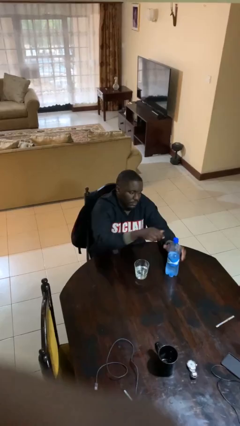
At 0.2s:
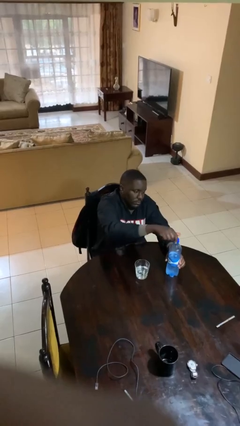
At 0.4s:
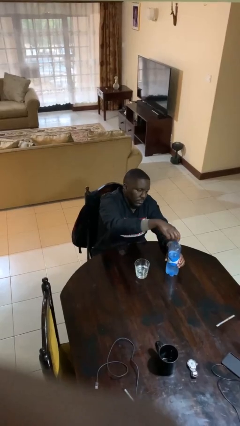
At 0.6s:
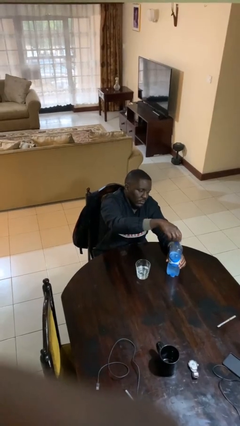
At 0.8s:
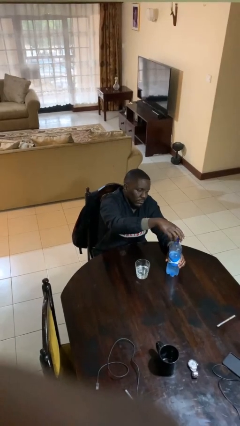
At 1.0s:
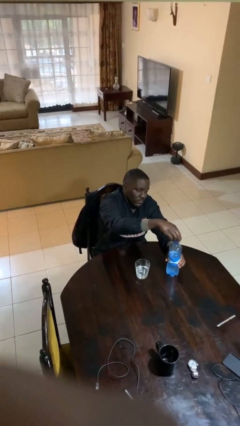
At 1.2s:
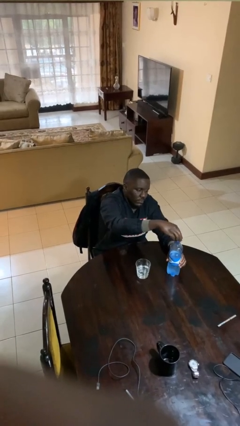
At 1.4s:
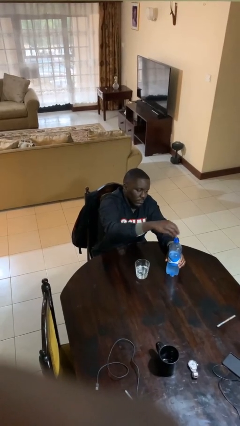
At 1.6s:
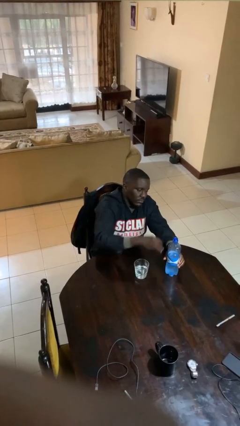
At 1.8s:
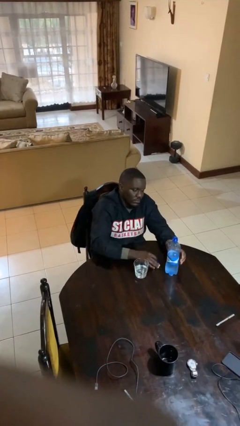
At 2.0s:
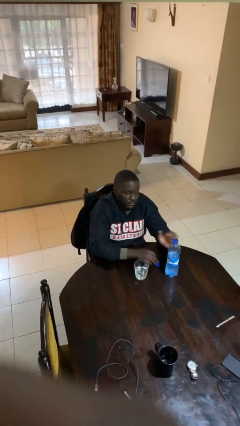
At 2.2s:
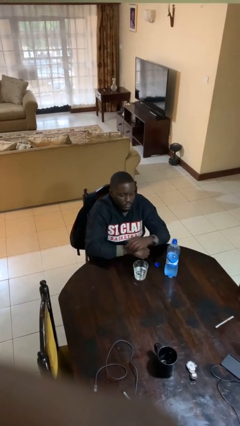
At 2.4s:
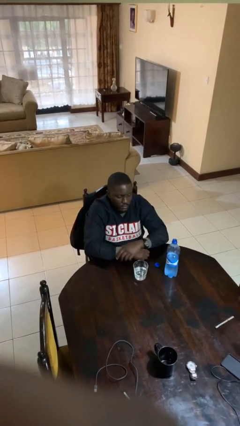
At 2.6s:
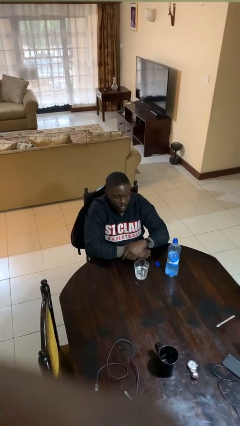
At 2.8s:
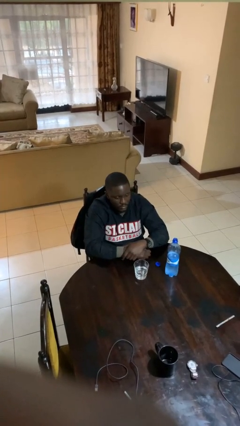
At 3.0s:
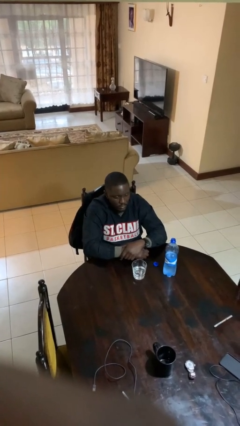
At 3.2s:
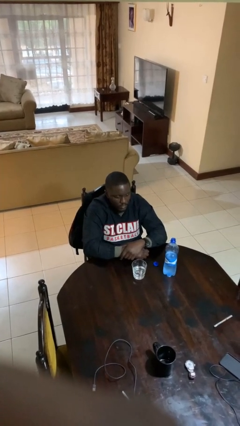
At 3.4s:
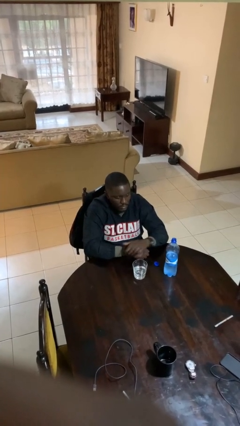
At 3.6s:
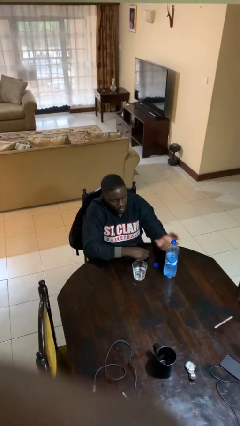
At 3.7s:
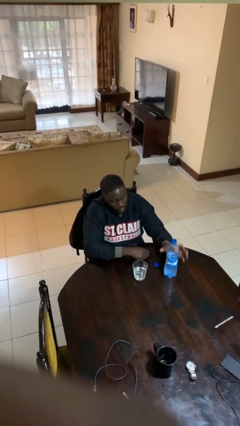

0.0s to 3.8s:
person unscrews lid from bottle

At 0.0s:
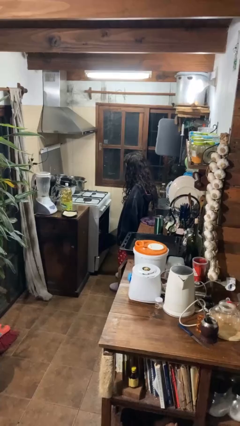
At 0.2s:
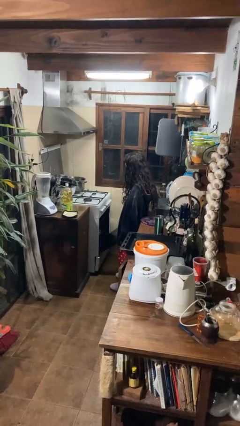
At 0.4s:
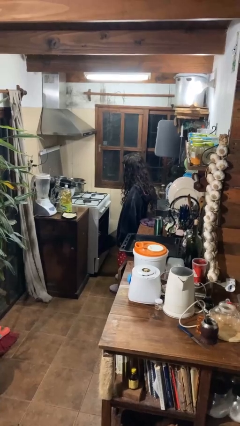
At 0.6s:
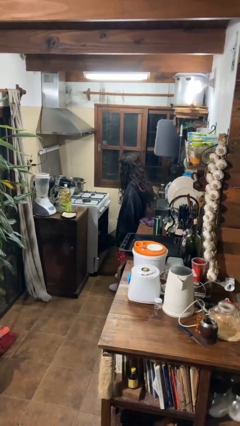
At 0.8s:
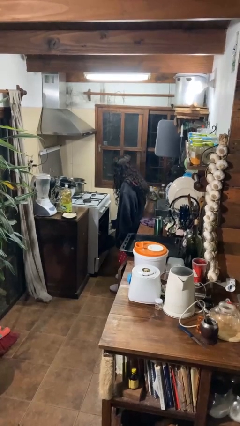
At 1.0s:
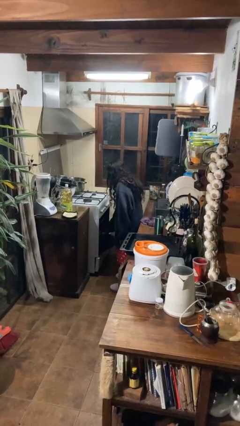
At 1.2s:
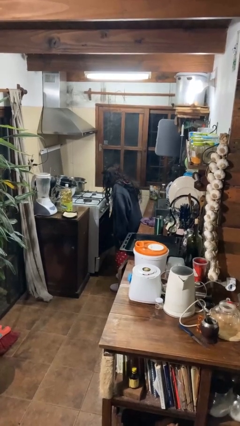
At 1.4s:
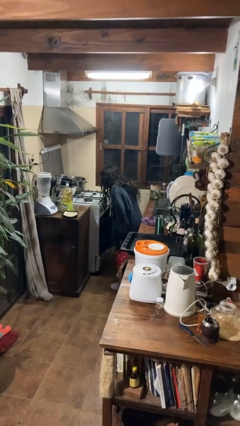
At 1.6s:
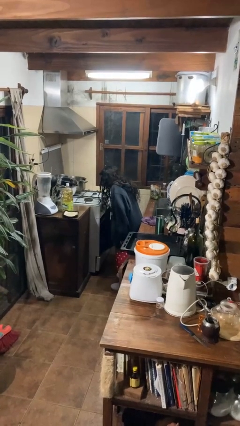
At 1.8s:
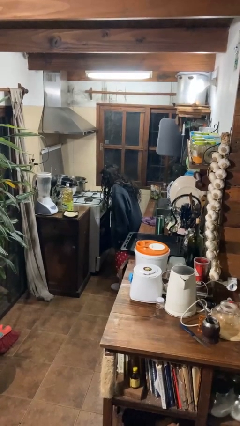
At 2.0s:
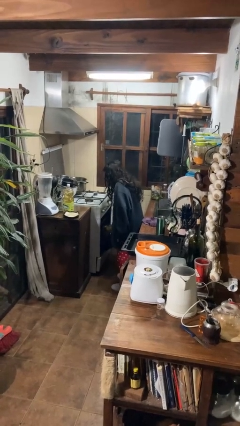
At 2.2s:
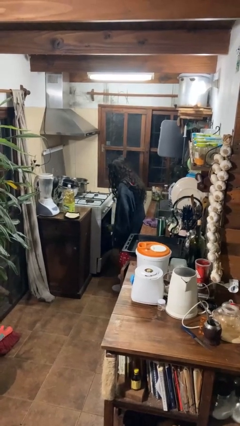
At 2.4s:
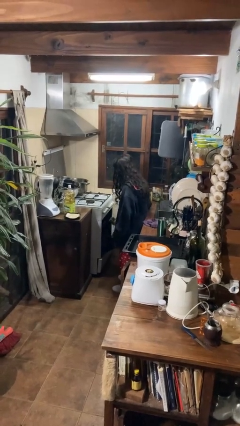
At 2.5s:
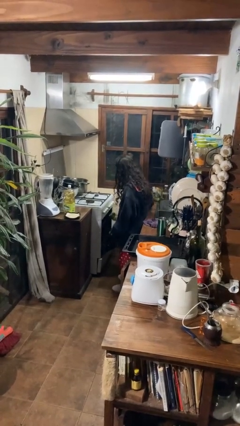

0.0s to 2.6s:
person takes object from oven

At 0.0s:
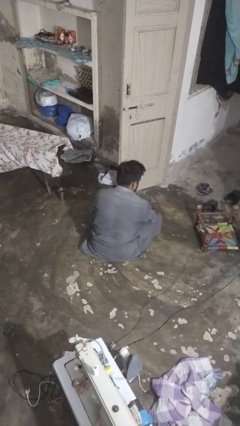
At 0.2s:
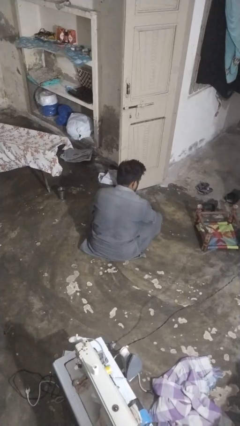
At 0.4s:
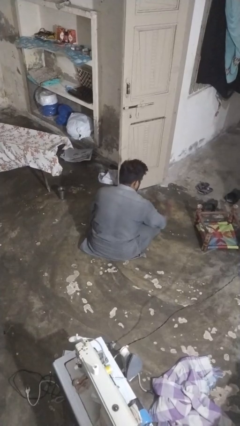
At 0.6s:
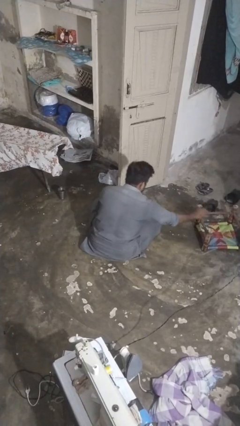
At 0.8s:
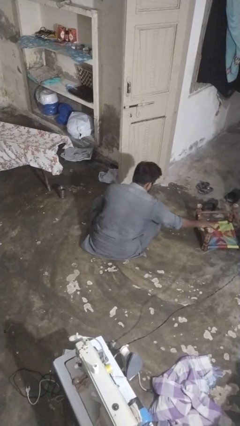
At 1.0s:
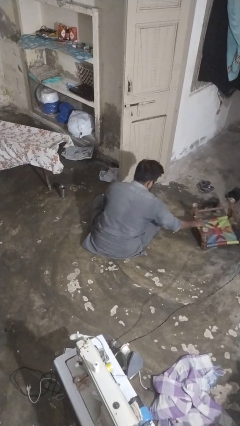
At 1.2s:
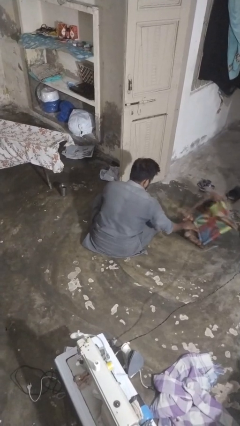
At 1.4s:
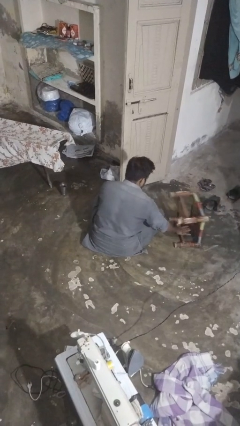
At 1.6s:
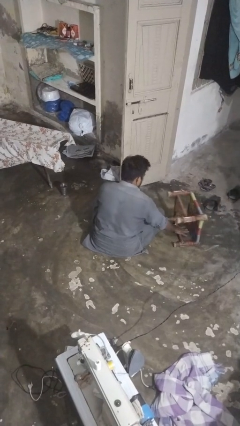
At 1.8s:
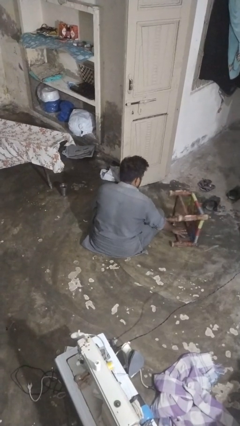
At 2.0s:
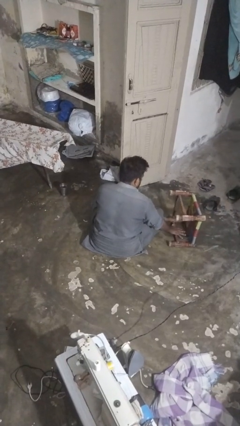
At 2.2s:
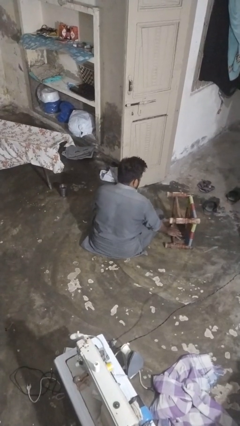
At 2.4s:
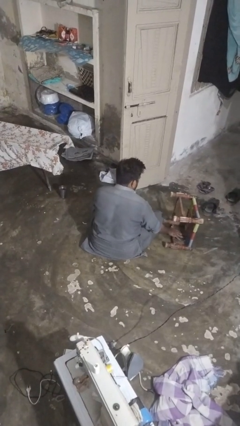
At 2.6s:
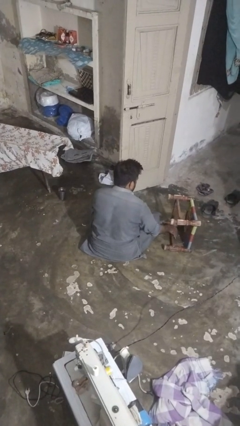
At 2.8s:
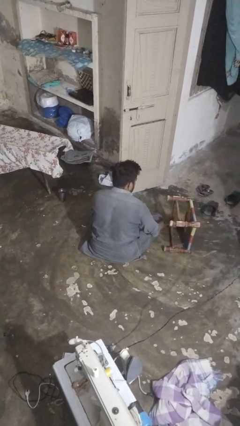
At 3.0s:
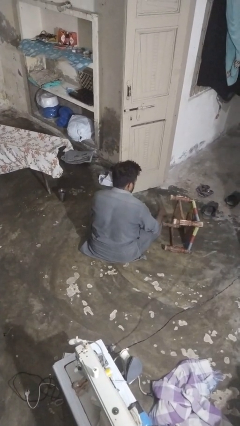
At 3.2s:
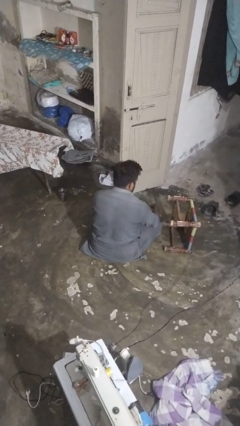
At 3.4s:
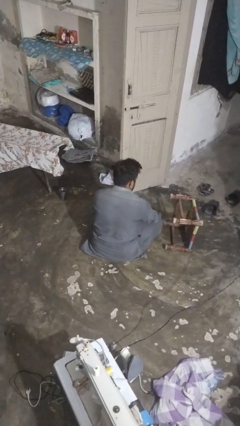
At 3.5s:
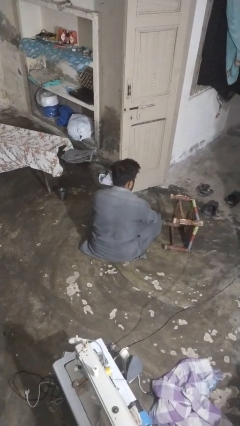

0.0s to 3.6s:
person sets upright furniture

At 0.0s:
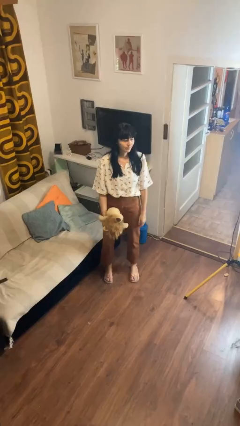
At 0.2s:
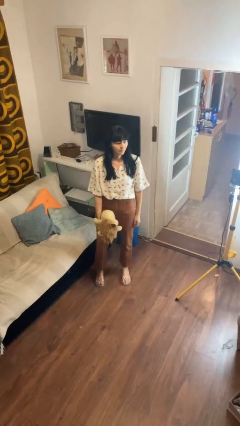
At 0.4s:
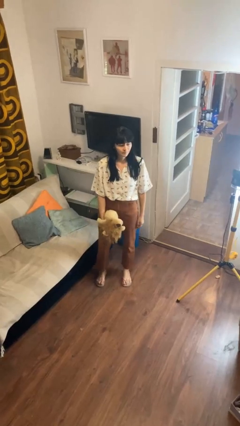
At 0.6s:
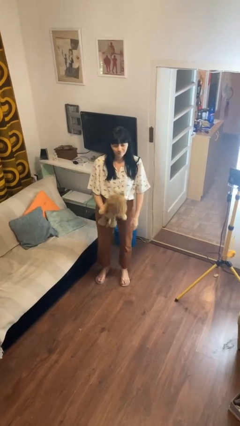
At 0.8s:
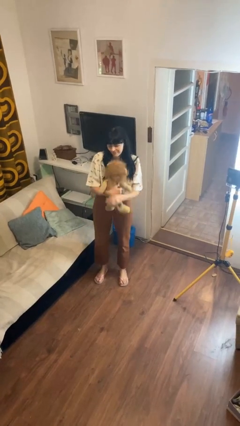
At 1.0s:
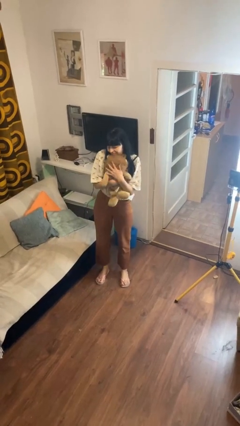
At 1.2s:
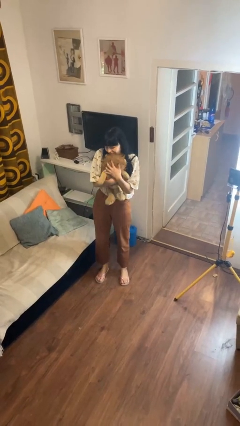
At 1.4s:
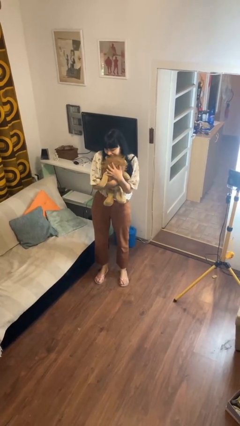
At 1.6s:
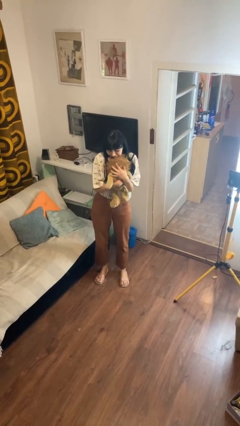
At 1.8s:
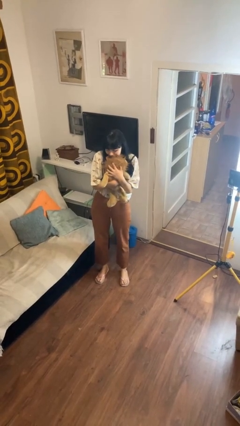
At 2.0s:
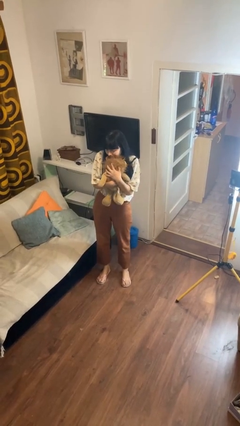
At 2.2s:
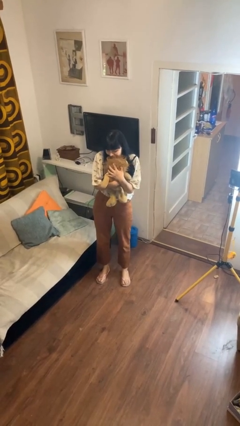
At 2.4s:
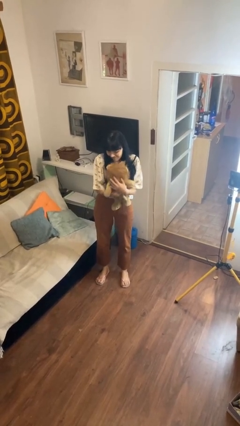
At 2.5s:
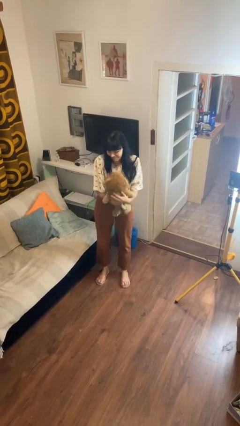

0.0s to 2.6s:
person hugs stuffed animal

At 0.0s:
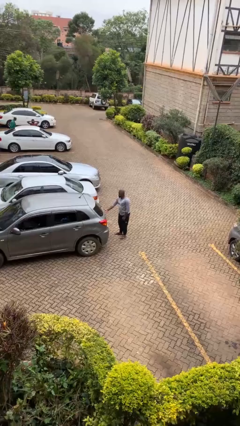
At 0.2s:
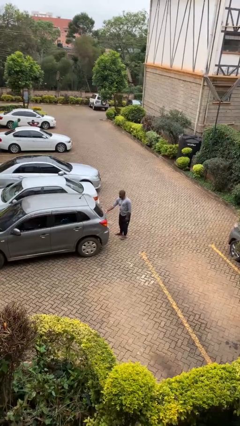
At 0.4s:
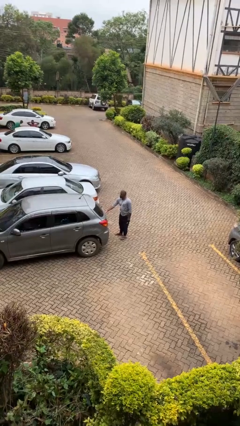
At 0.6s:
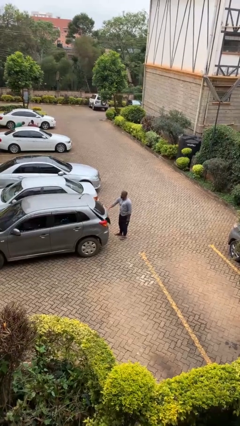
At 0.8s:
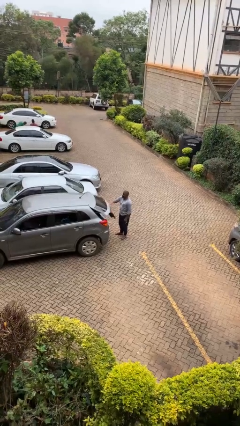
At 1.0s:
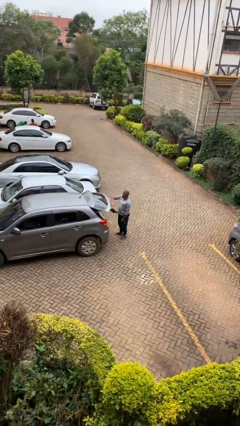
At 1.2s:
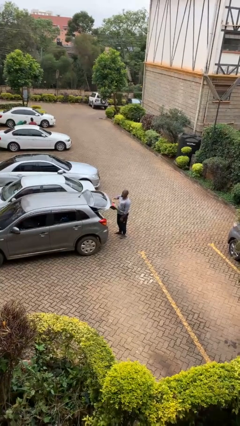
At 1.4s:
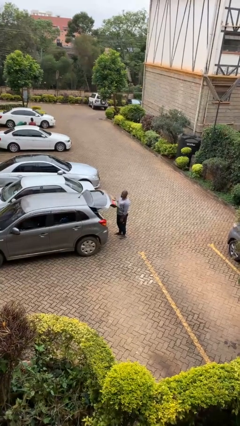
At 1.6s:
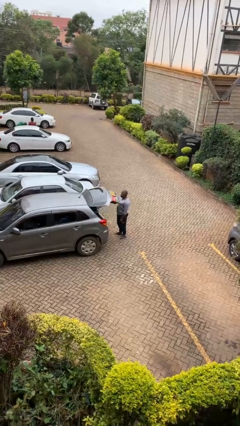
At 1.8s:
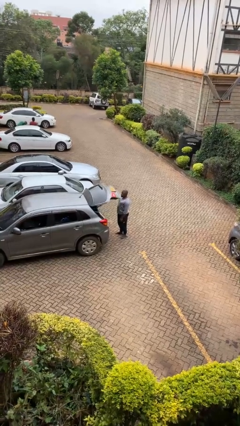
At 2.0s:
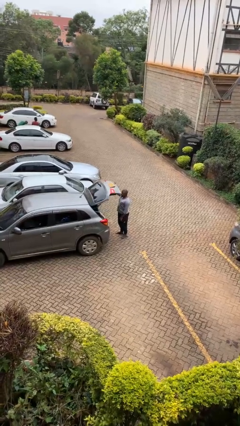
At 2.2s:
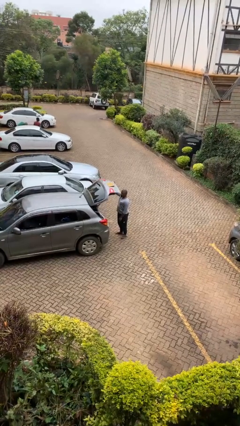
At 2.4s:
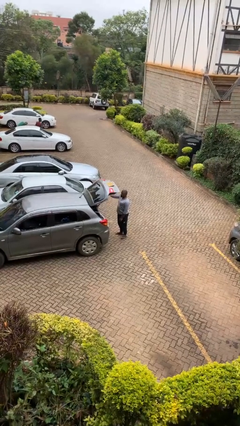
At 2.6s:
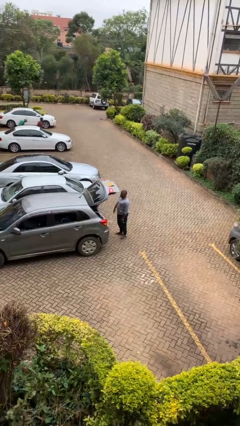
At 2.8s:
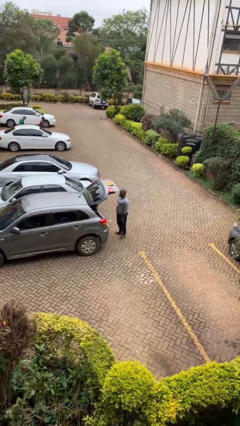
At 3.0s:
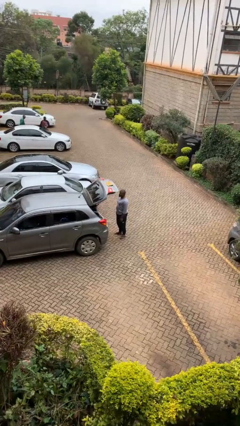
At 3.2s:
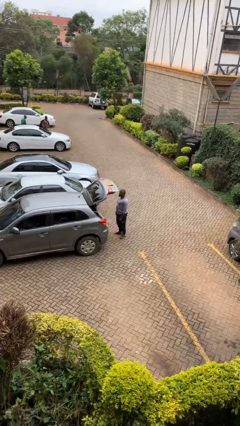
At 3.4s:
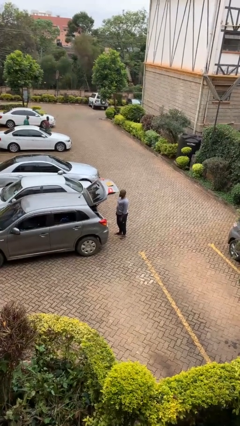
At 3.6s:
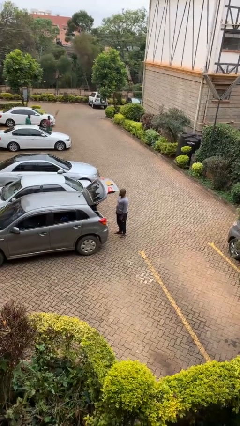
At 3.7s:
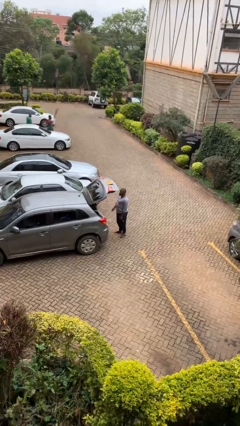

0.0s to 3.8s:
person opens car trunk

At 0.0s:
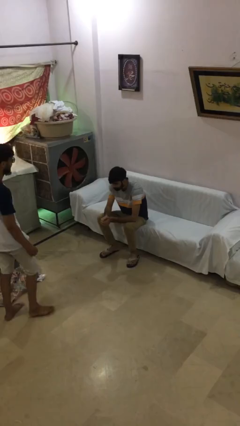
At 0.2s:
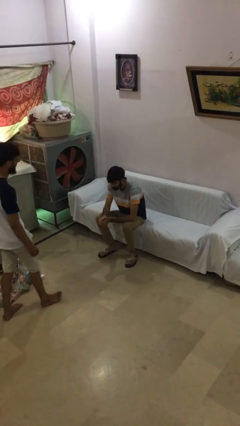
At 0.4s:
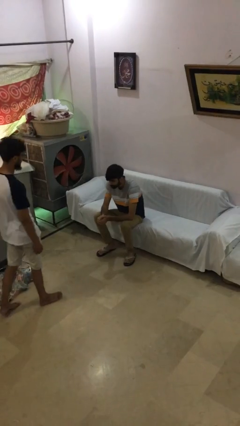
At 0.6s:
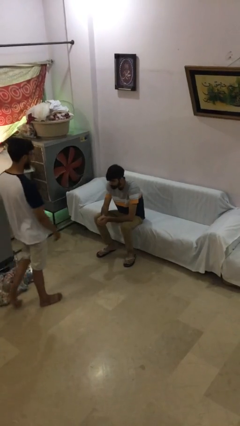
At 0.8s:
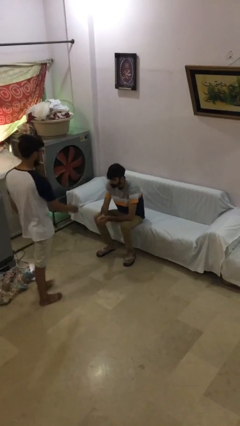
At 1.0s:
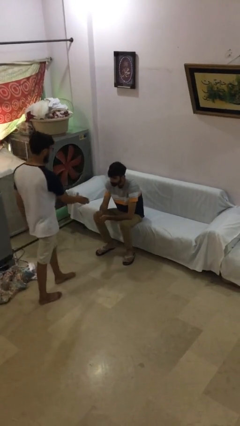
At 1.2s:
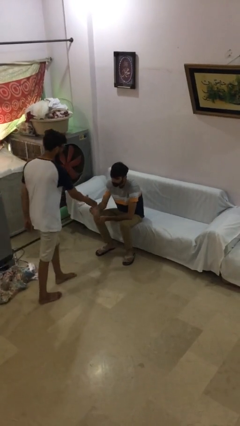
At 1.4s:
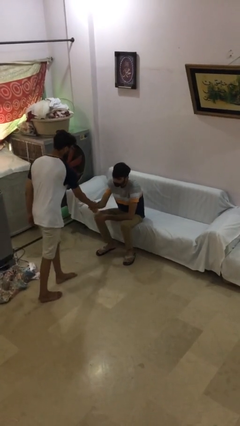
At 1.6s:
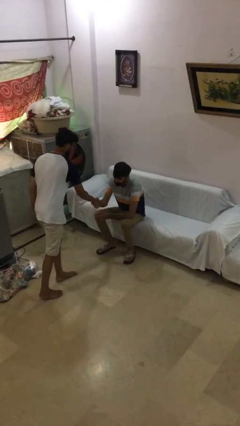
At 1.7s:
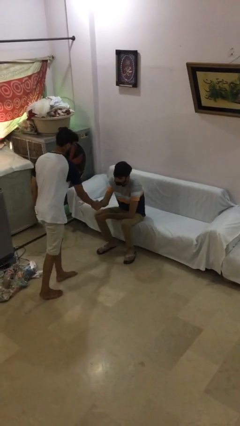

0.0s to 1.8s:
person shakes hand
